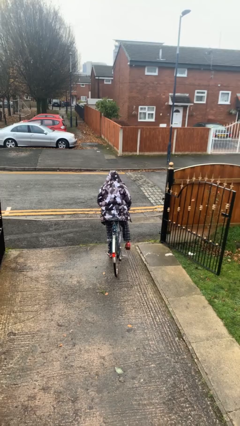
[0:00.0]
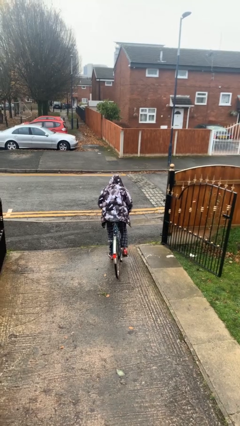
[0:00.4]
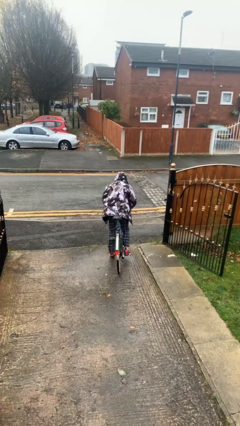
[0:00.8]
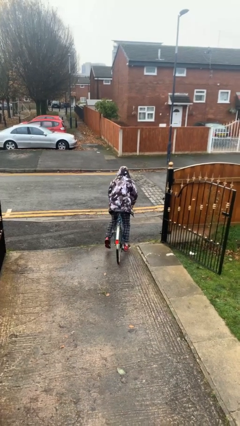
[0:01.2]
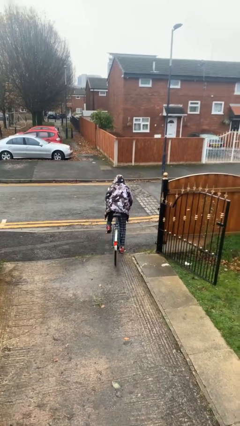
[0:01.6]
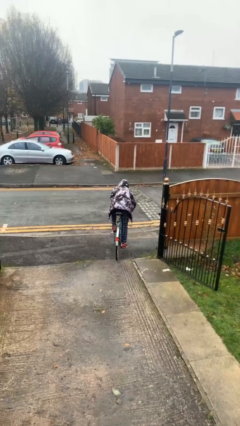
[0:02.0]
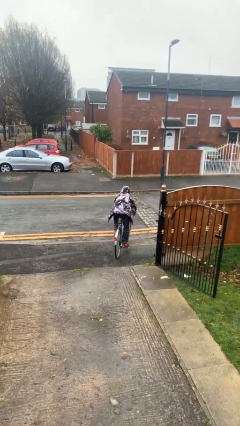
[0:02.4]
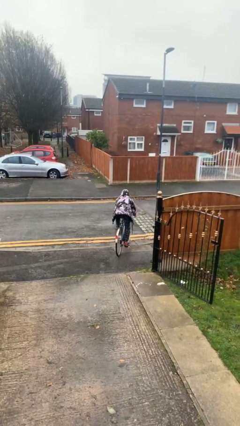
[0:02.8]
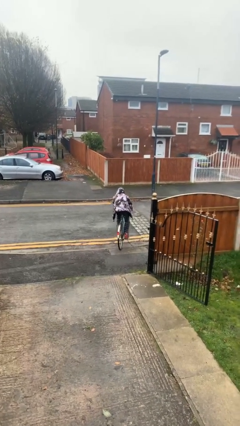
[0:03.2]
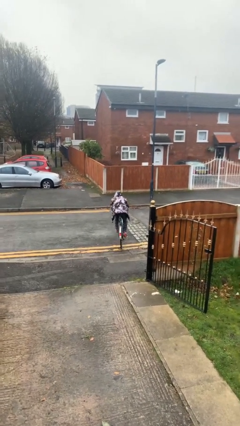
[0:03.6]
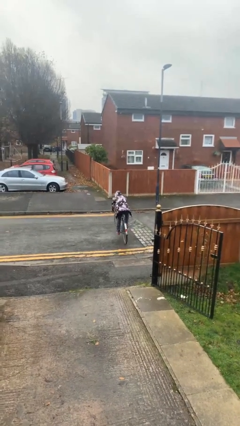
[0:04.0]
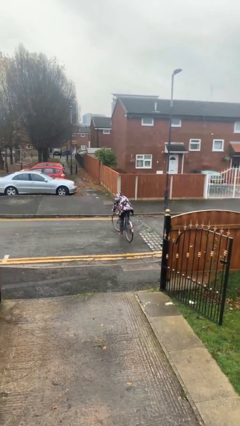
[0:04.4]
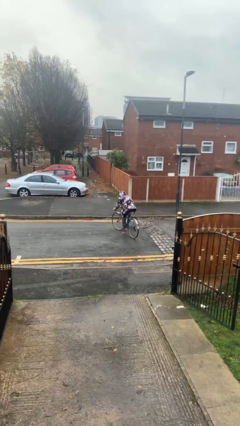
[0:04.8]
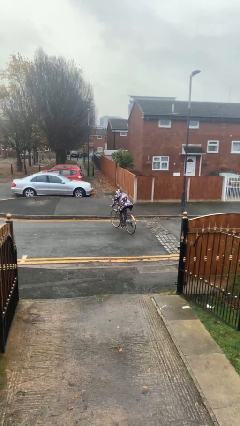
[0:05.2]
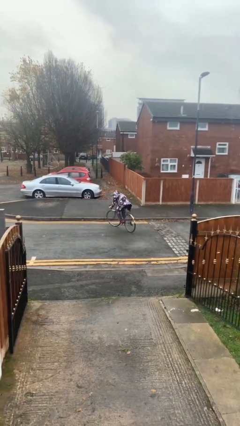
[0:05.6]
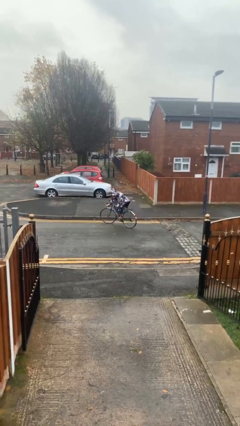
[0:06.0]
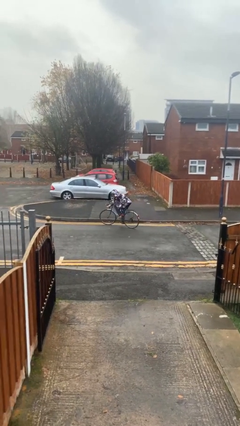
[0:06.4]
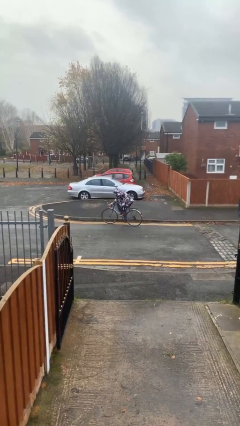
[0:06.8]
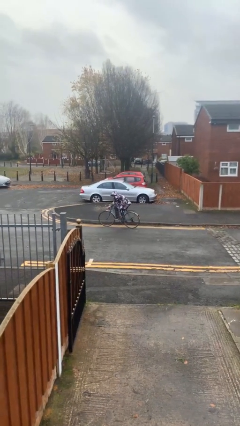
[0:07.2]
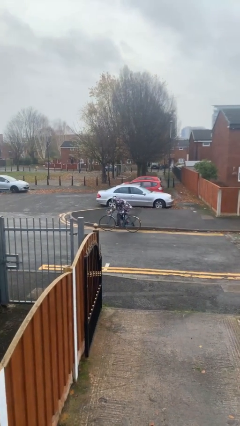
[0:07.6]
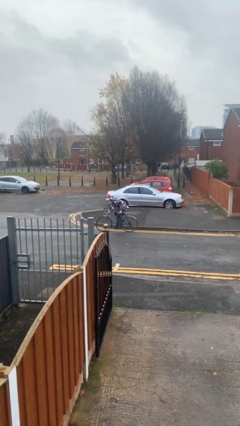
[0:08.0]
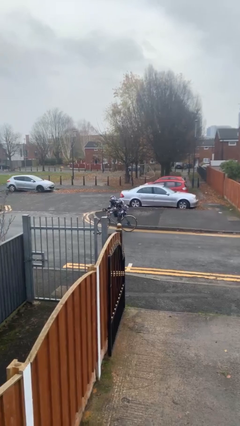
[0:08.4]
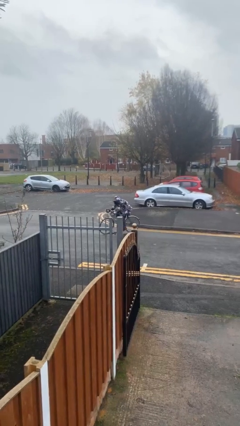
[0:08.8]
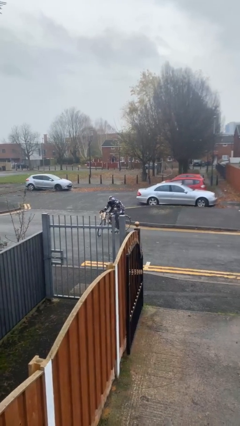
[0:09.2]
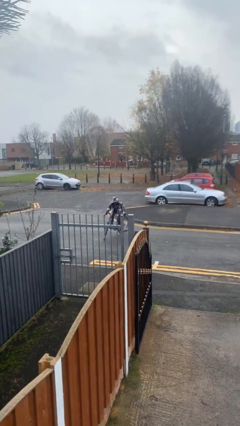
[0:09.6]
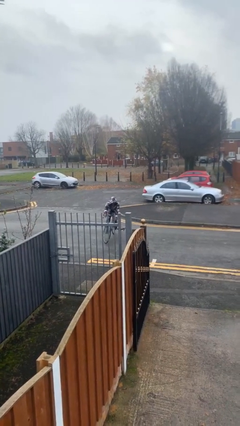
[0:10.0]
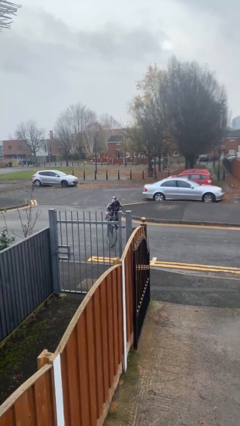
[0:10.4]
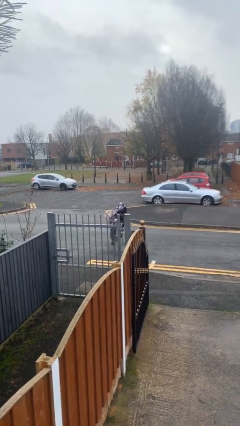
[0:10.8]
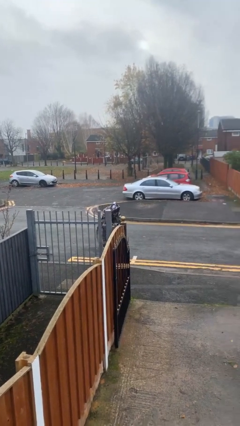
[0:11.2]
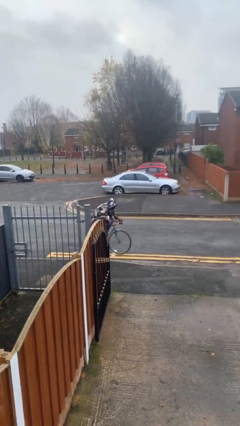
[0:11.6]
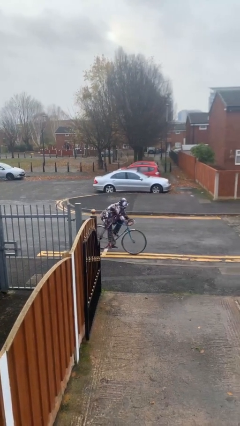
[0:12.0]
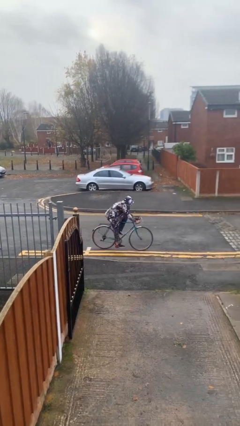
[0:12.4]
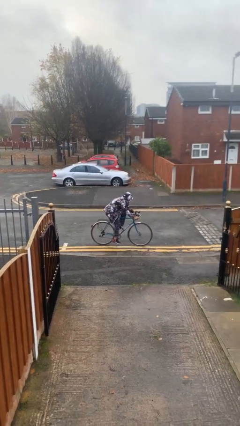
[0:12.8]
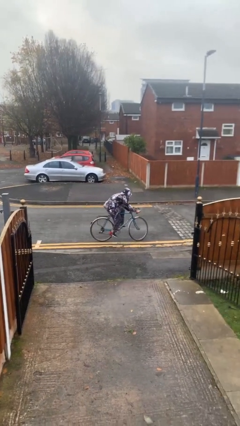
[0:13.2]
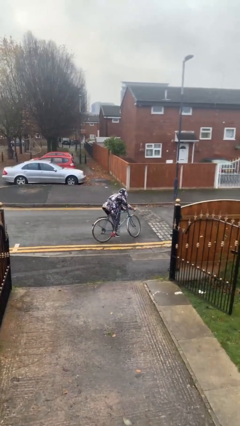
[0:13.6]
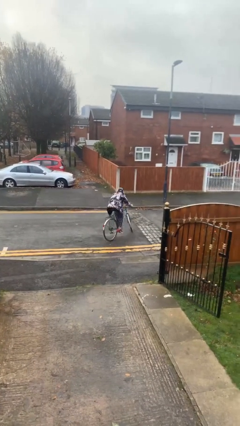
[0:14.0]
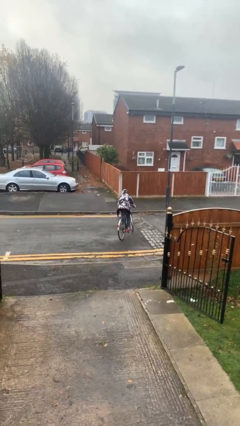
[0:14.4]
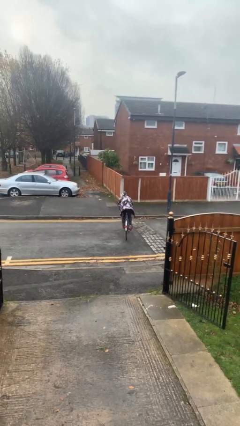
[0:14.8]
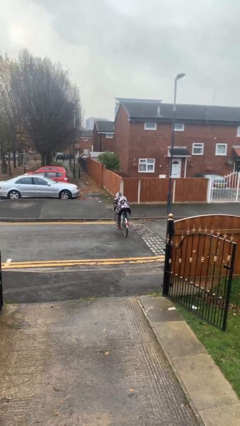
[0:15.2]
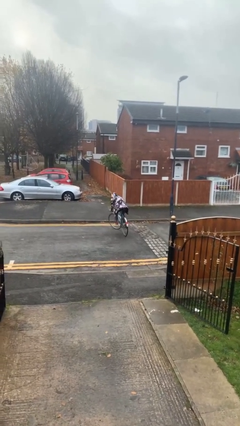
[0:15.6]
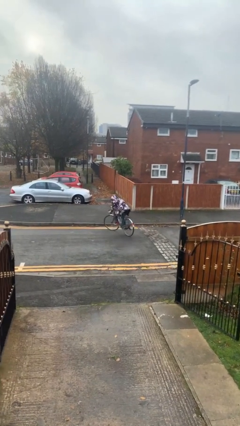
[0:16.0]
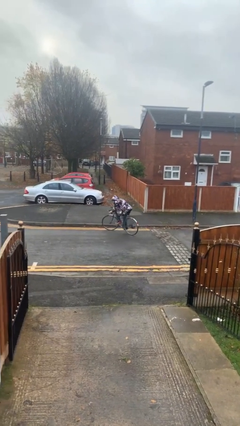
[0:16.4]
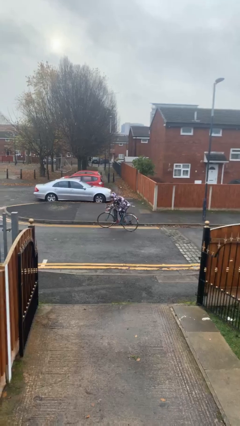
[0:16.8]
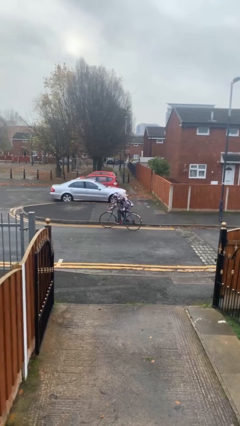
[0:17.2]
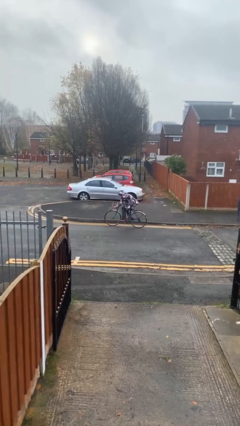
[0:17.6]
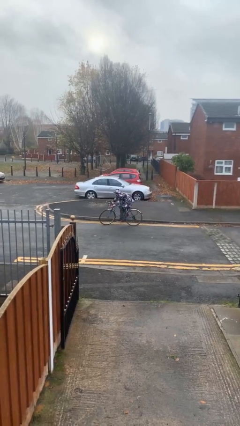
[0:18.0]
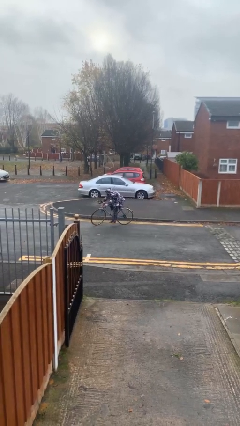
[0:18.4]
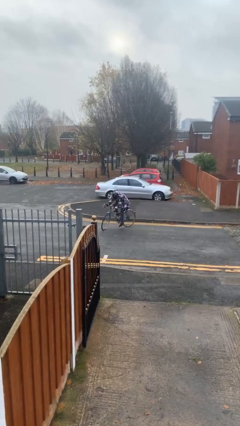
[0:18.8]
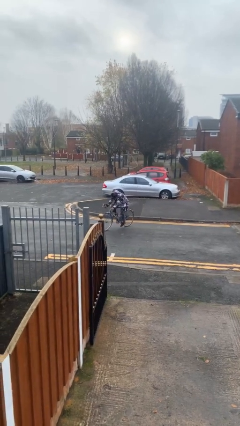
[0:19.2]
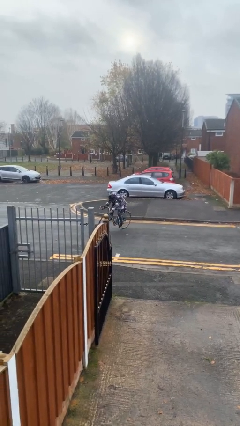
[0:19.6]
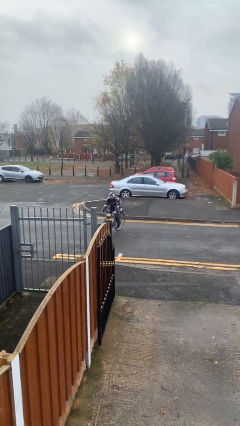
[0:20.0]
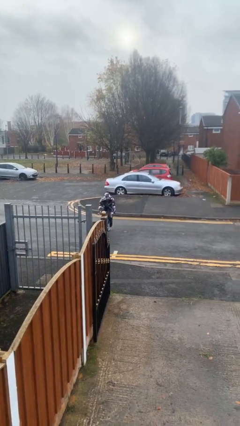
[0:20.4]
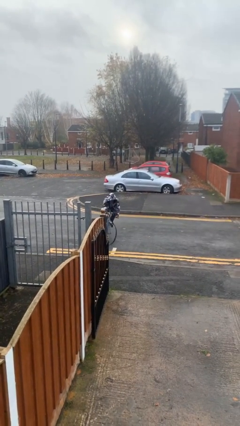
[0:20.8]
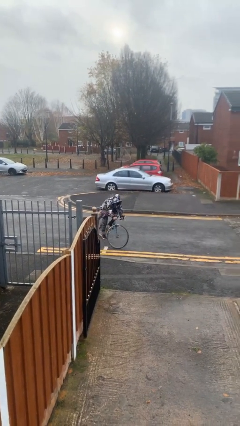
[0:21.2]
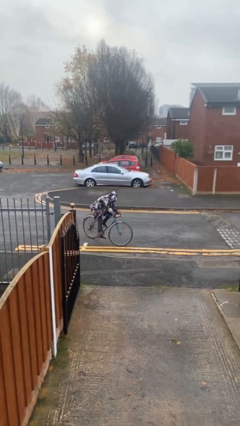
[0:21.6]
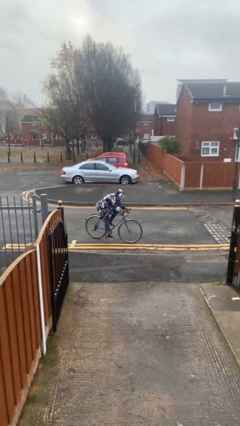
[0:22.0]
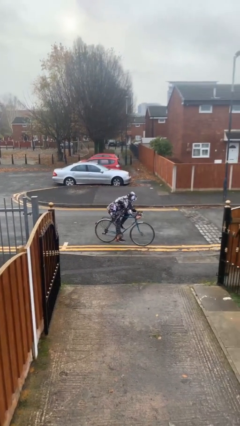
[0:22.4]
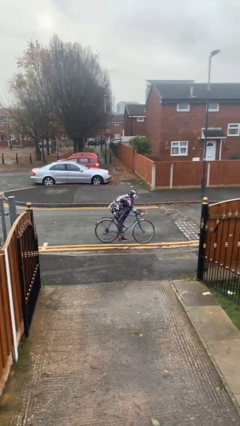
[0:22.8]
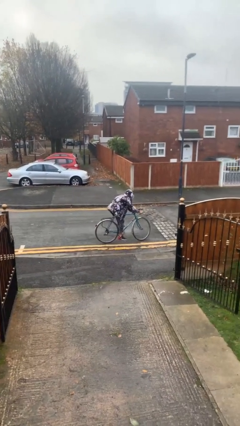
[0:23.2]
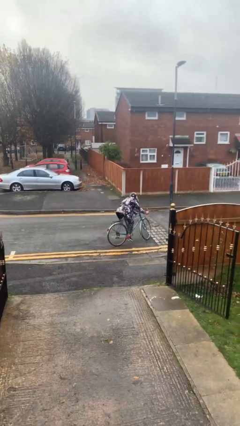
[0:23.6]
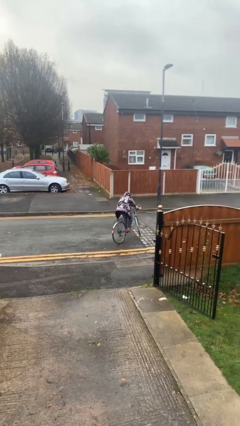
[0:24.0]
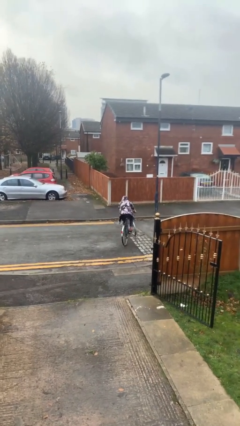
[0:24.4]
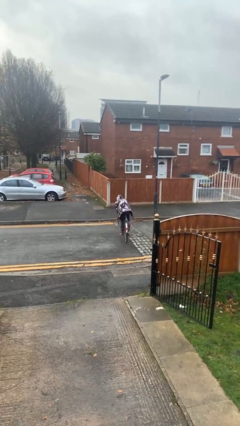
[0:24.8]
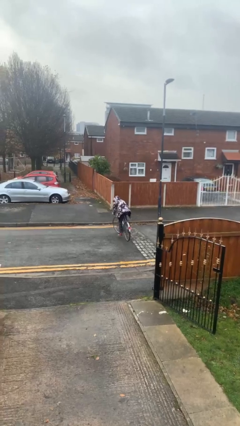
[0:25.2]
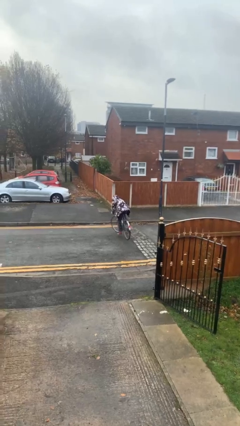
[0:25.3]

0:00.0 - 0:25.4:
person rides bicycle

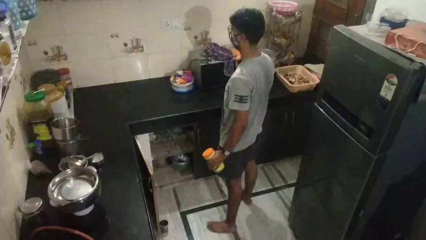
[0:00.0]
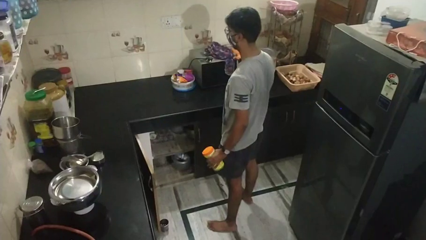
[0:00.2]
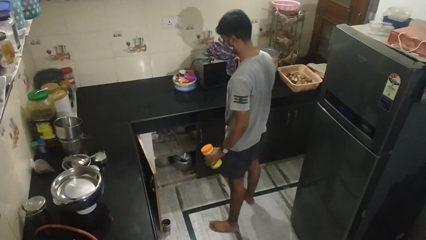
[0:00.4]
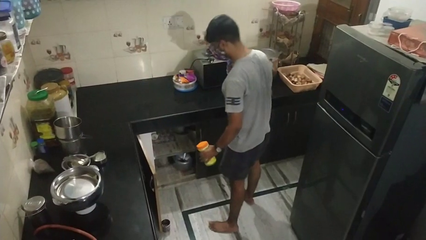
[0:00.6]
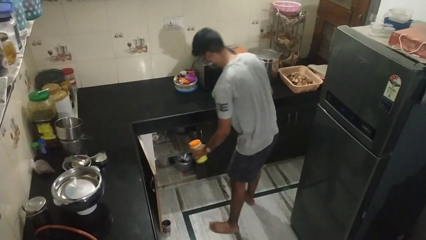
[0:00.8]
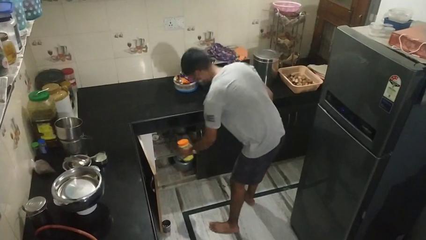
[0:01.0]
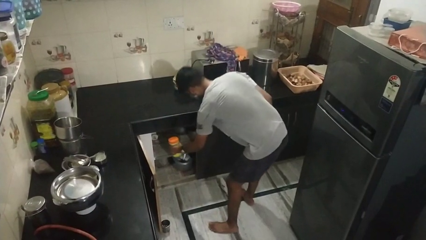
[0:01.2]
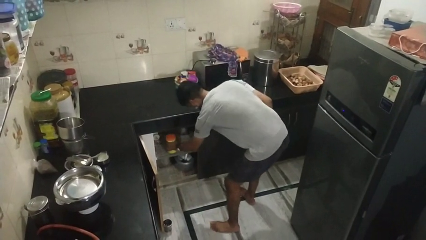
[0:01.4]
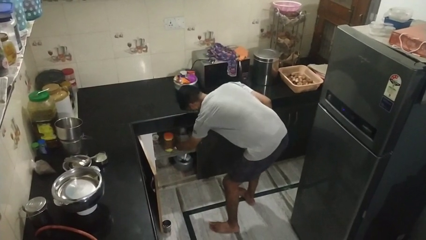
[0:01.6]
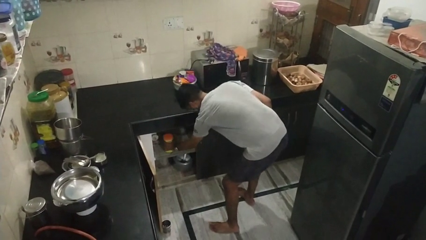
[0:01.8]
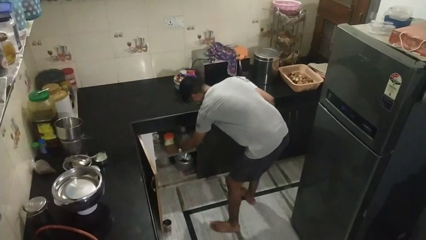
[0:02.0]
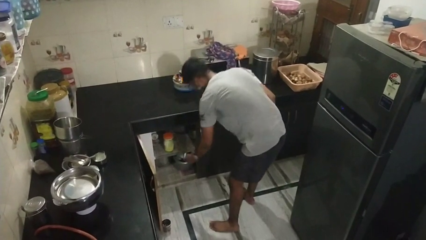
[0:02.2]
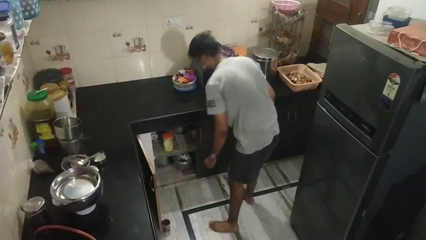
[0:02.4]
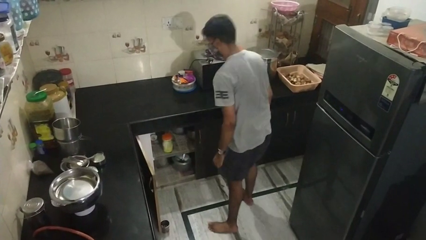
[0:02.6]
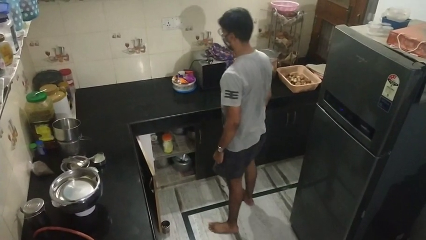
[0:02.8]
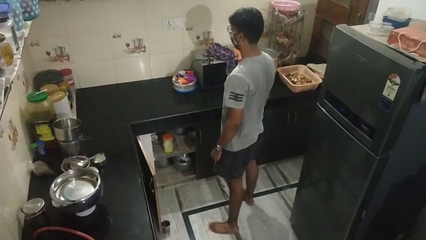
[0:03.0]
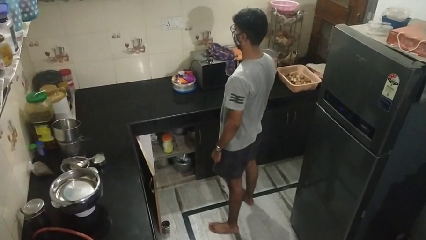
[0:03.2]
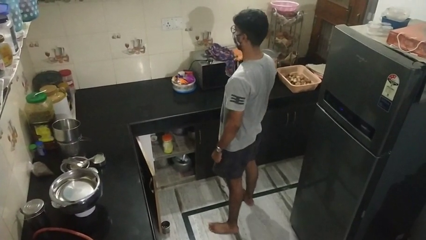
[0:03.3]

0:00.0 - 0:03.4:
person puts down object into cabinet

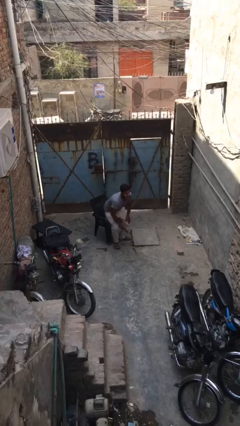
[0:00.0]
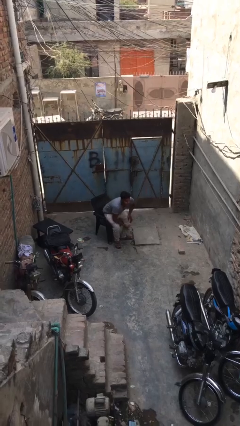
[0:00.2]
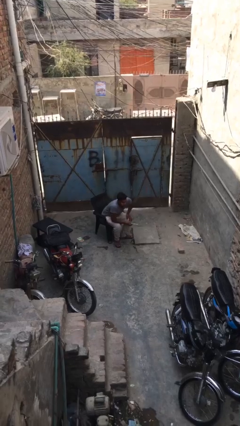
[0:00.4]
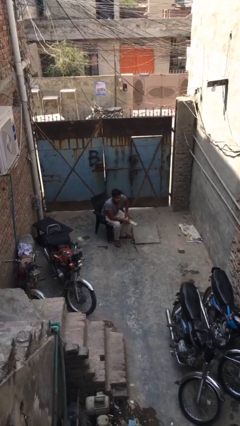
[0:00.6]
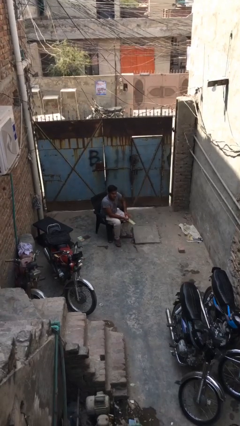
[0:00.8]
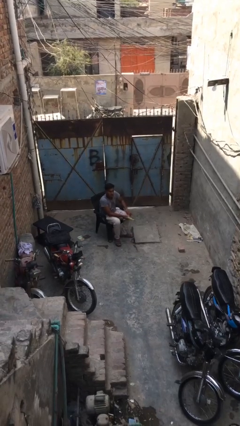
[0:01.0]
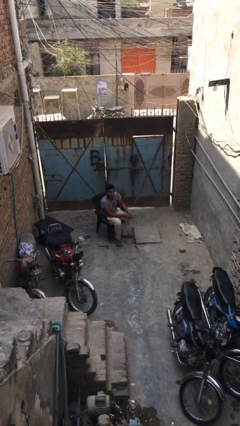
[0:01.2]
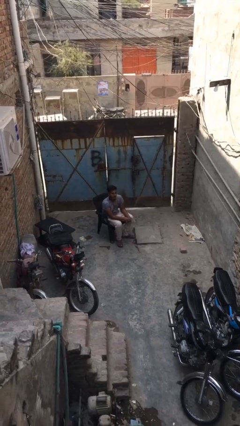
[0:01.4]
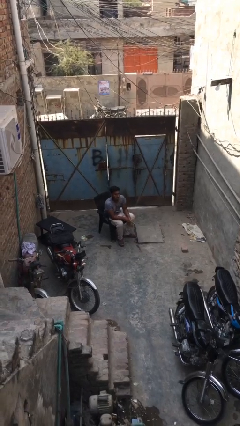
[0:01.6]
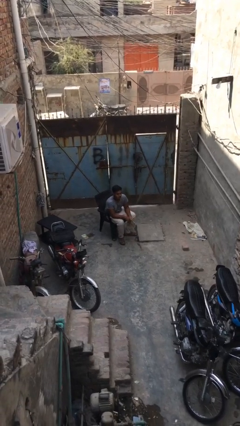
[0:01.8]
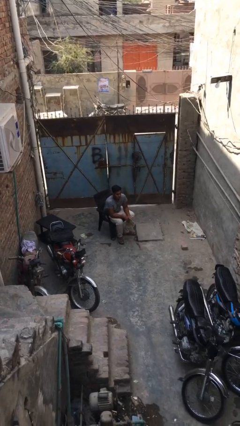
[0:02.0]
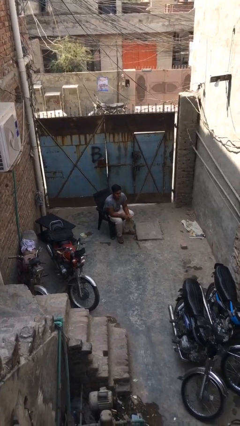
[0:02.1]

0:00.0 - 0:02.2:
person sits down
